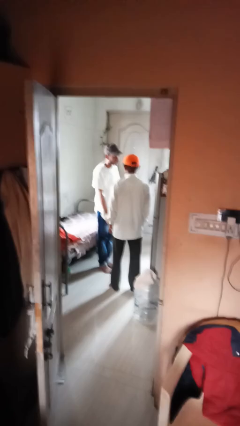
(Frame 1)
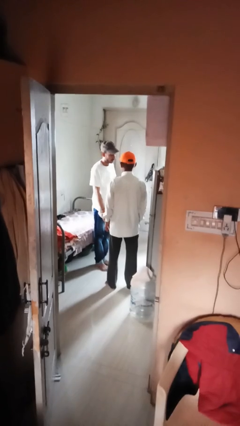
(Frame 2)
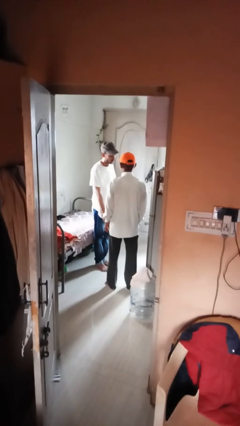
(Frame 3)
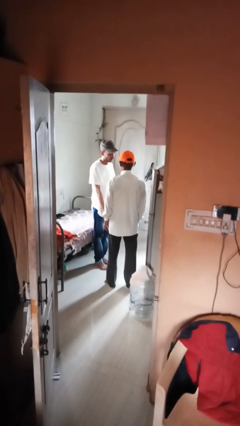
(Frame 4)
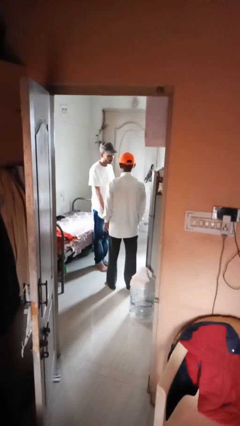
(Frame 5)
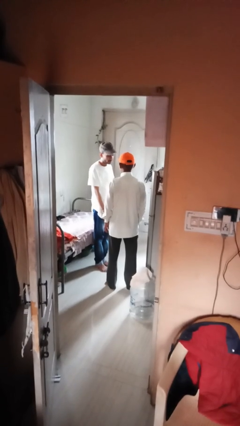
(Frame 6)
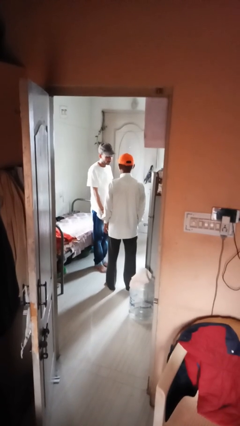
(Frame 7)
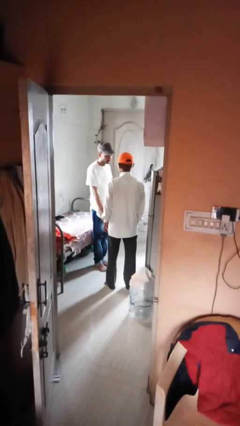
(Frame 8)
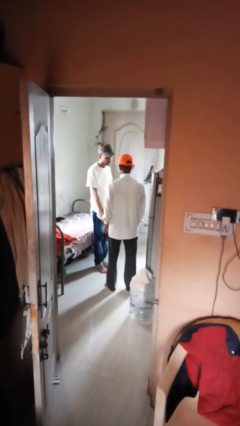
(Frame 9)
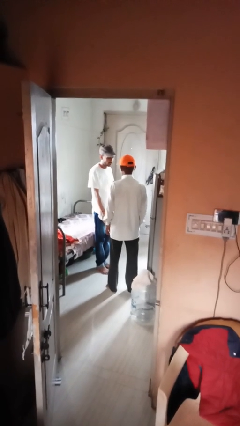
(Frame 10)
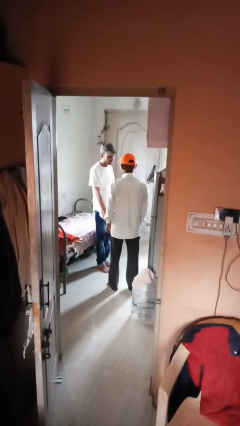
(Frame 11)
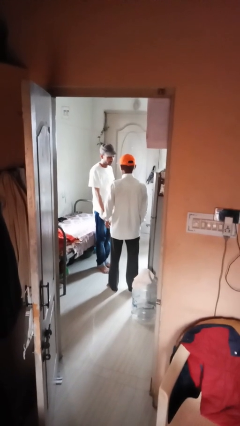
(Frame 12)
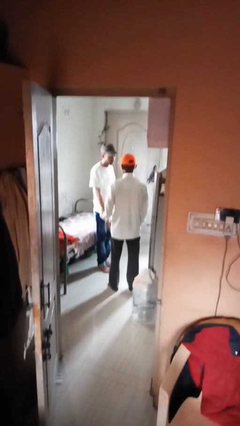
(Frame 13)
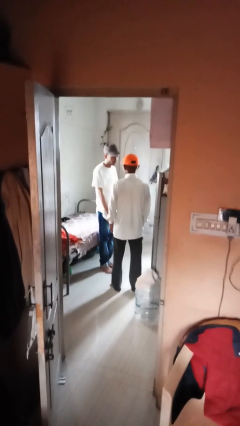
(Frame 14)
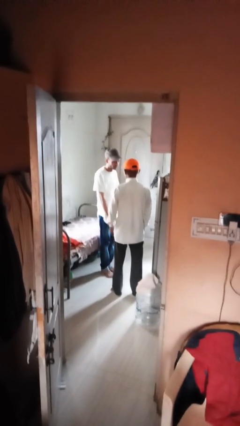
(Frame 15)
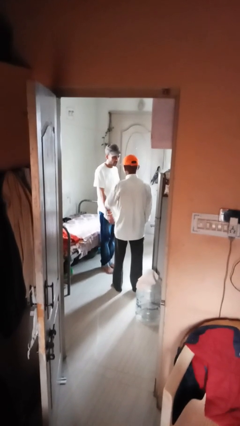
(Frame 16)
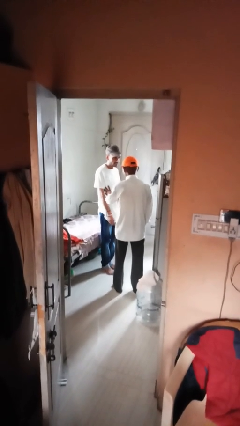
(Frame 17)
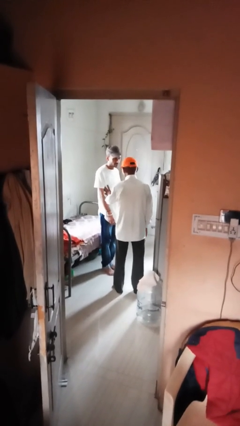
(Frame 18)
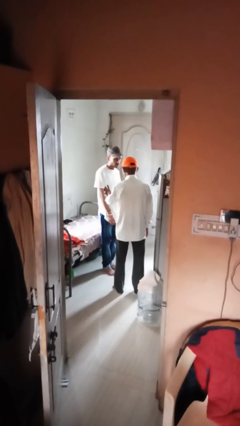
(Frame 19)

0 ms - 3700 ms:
person tickles person

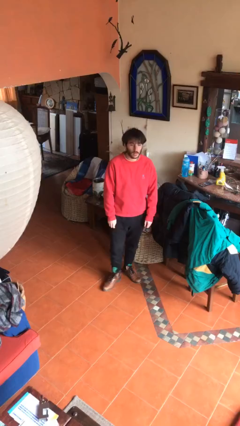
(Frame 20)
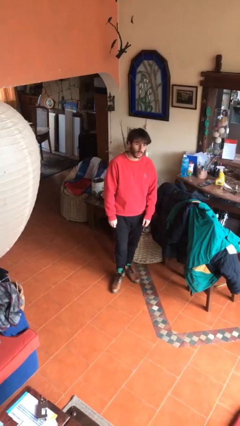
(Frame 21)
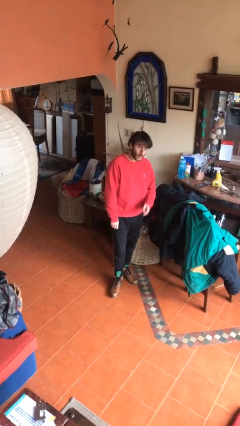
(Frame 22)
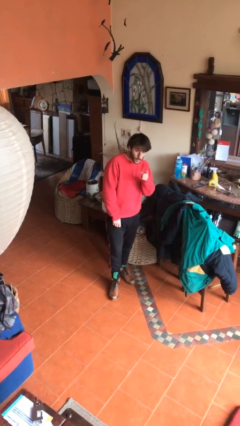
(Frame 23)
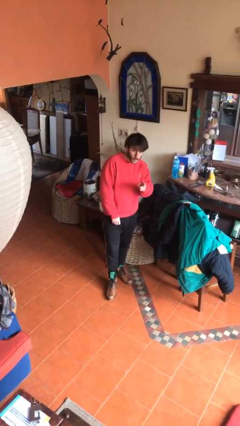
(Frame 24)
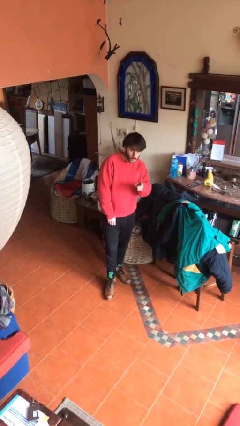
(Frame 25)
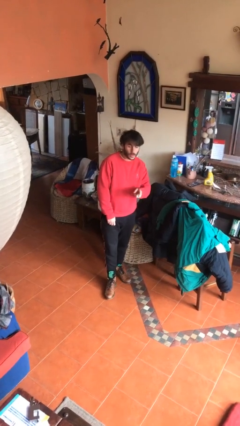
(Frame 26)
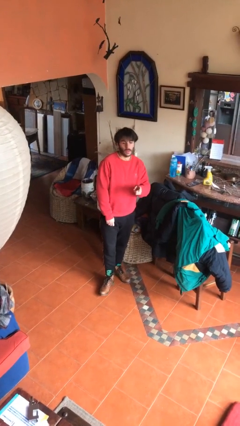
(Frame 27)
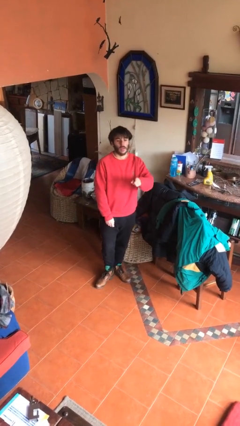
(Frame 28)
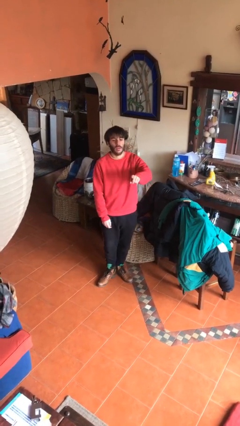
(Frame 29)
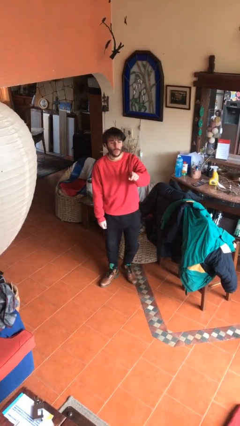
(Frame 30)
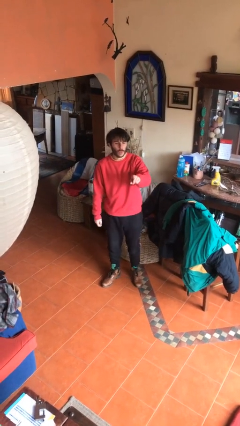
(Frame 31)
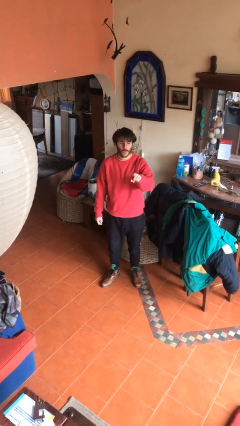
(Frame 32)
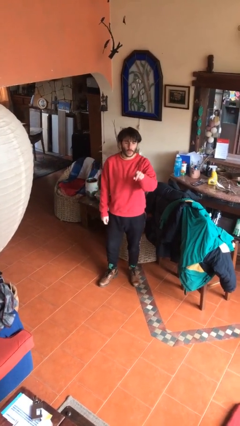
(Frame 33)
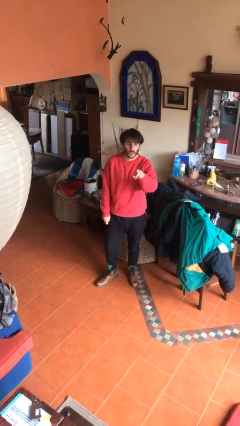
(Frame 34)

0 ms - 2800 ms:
person points at person

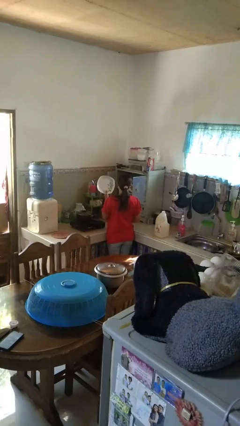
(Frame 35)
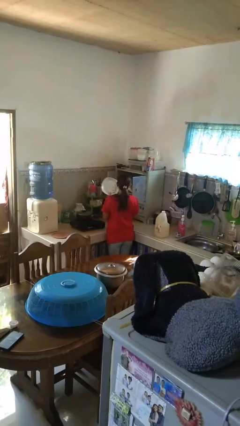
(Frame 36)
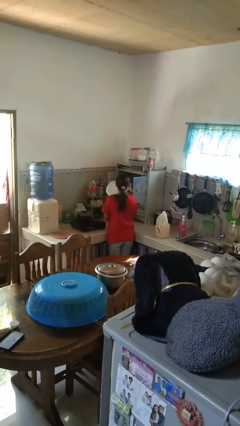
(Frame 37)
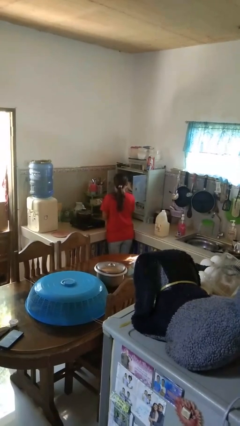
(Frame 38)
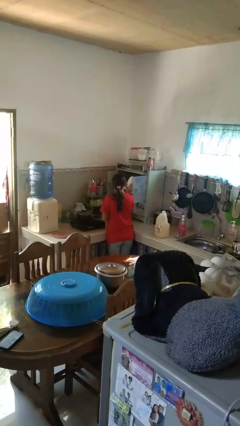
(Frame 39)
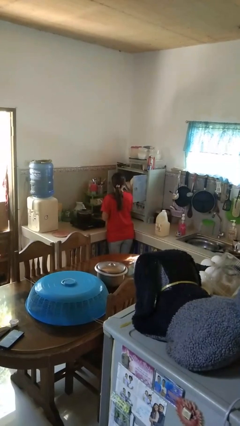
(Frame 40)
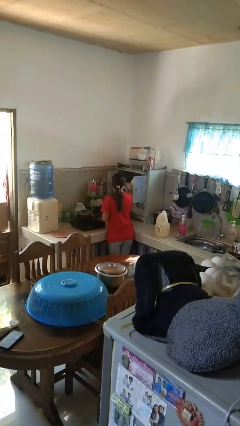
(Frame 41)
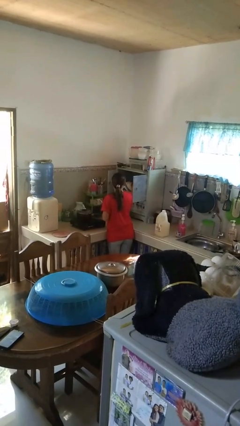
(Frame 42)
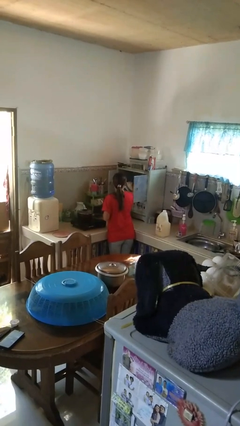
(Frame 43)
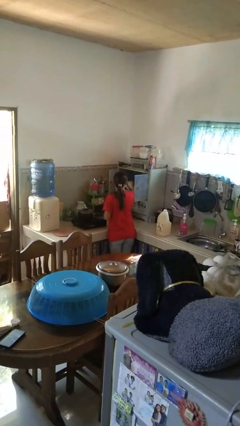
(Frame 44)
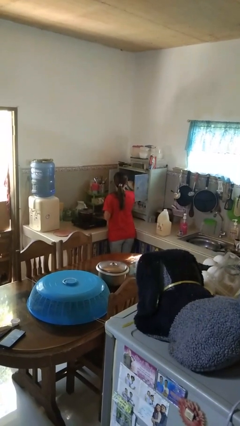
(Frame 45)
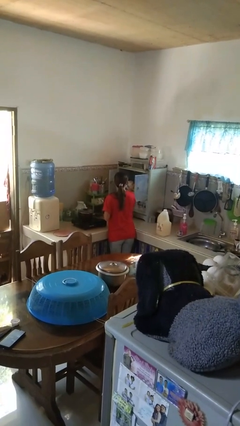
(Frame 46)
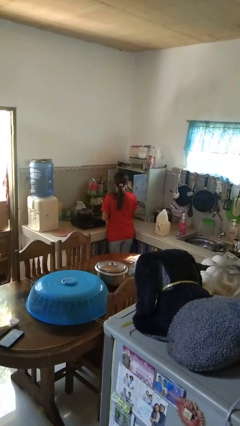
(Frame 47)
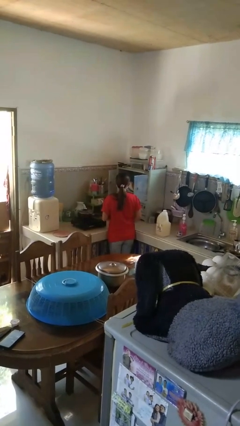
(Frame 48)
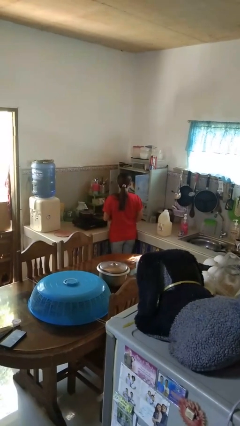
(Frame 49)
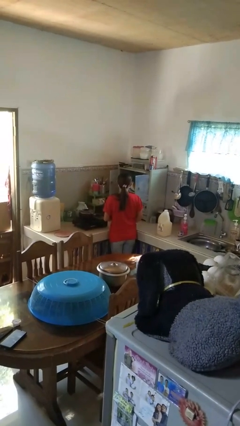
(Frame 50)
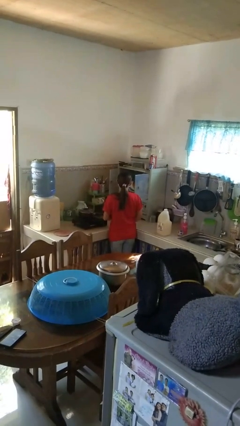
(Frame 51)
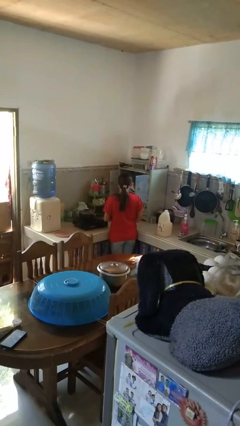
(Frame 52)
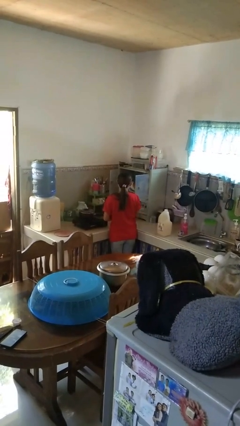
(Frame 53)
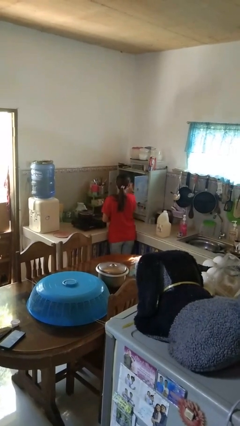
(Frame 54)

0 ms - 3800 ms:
person puts object in cabinet

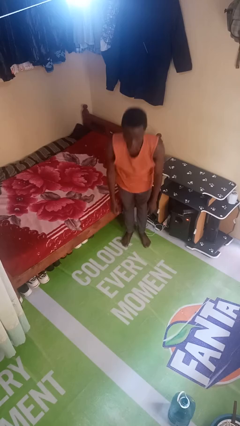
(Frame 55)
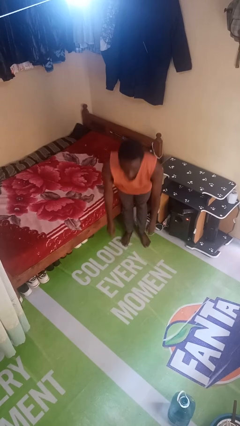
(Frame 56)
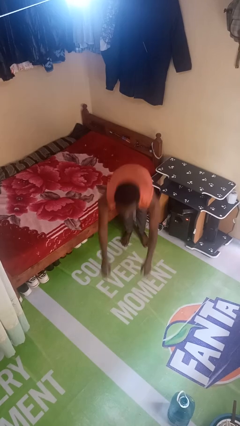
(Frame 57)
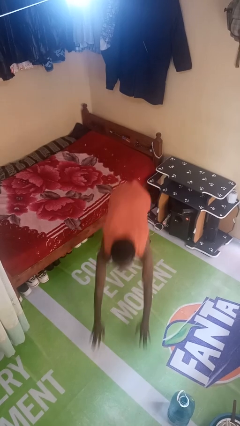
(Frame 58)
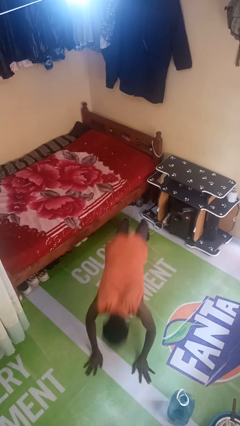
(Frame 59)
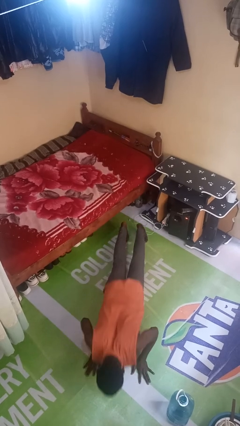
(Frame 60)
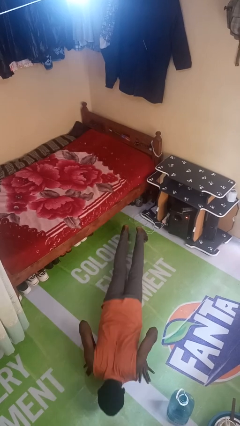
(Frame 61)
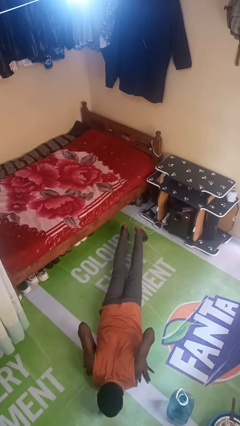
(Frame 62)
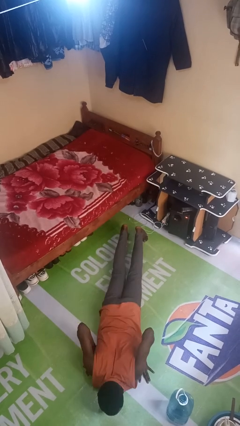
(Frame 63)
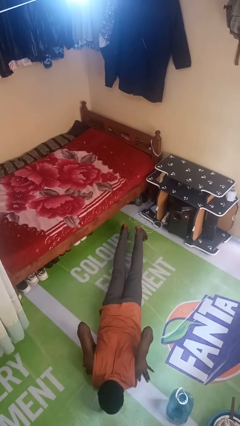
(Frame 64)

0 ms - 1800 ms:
person falls while standing

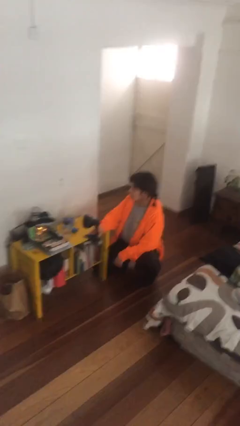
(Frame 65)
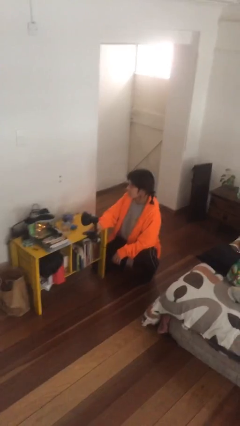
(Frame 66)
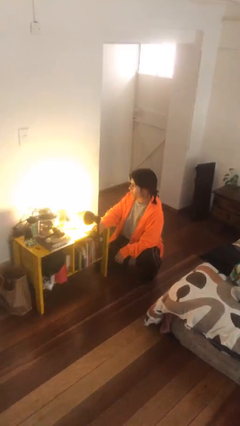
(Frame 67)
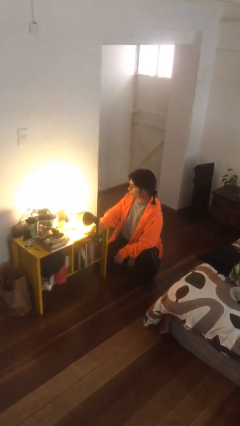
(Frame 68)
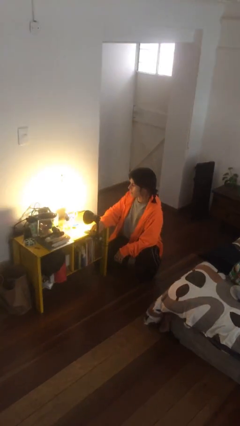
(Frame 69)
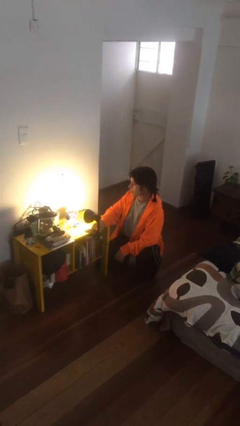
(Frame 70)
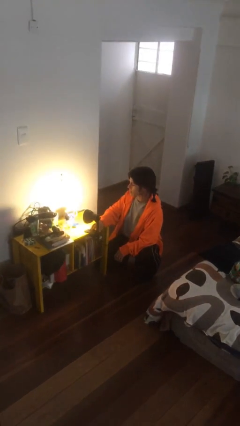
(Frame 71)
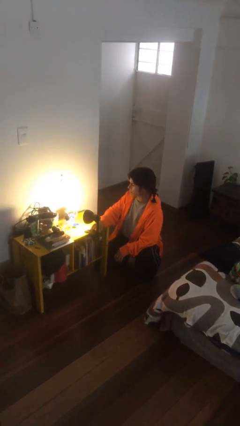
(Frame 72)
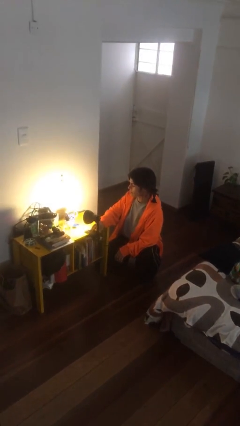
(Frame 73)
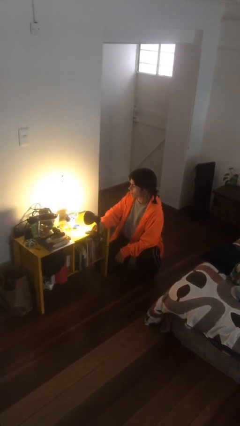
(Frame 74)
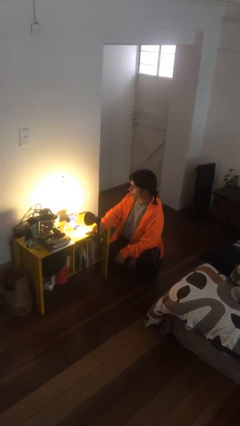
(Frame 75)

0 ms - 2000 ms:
person turns on lamp

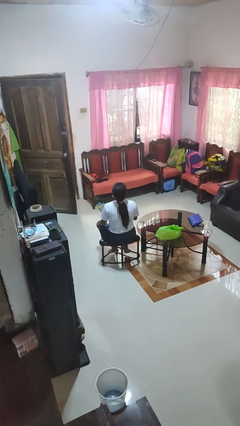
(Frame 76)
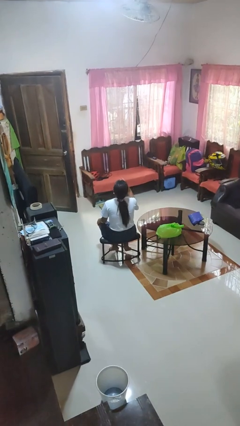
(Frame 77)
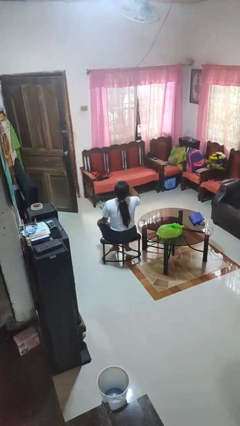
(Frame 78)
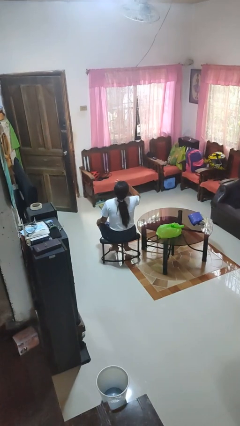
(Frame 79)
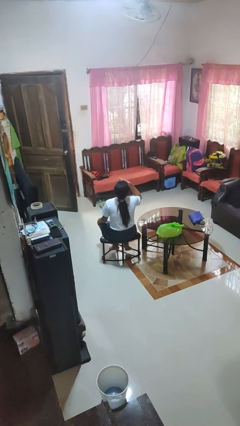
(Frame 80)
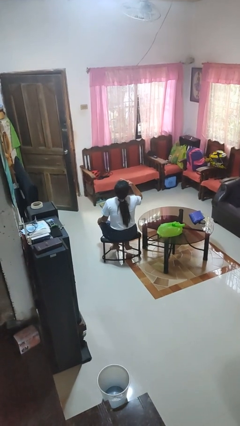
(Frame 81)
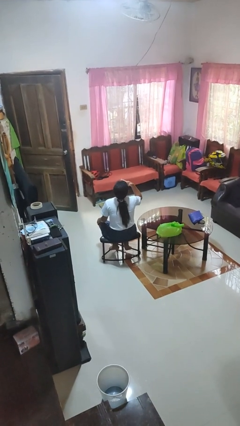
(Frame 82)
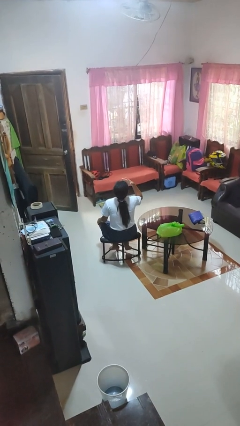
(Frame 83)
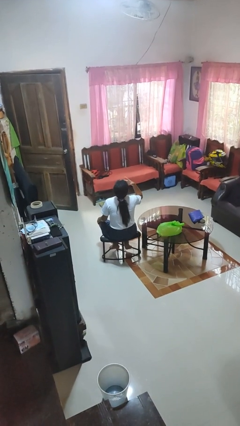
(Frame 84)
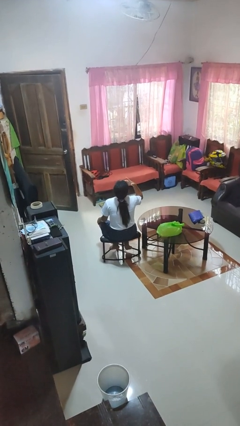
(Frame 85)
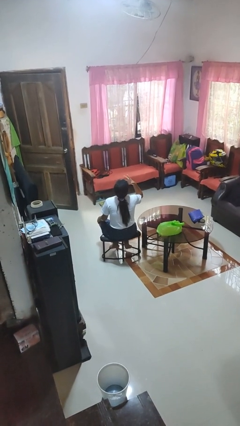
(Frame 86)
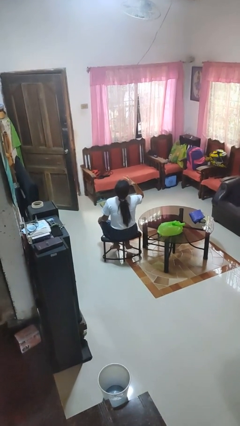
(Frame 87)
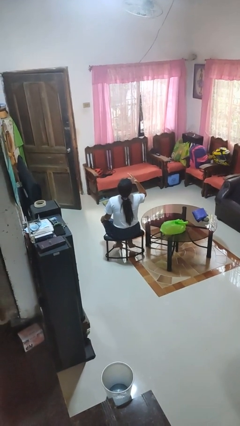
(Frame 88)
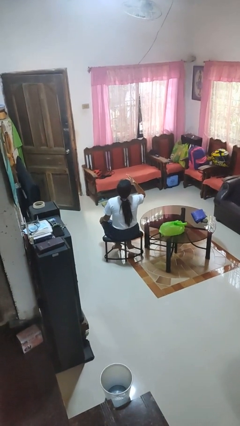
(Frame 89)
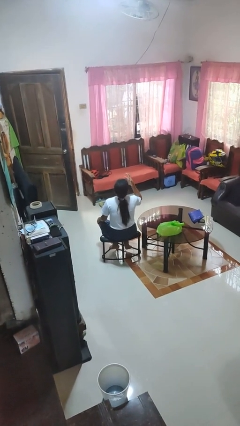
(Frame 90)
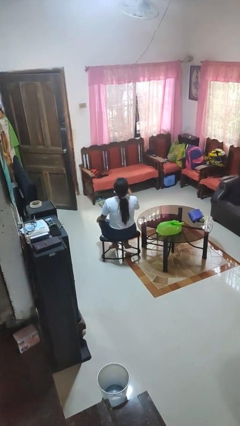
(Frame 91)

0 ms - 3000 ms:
person licks fingers

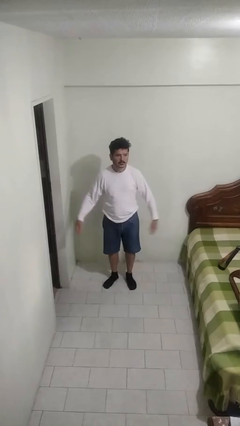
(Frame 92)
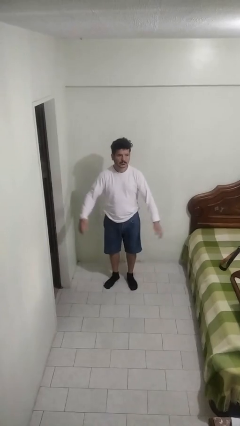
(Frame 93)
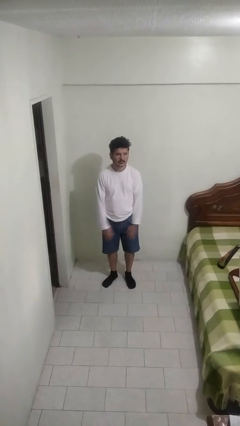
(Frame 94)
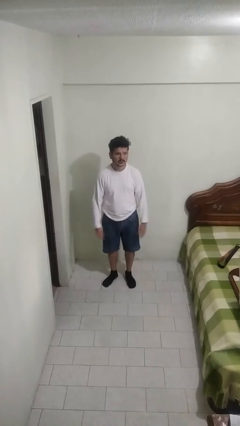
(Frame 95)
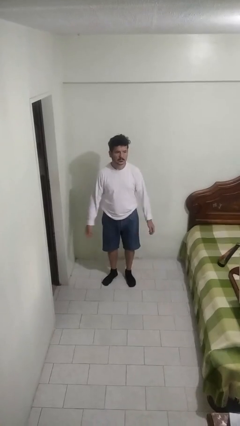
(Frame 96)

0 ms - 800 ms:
person slaps hands on thighs
